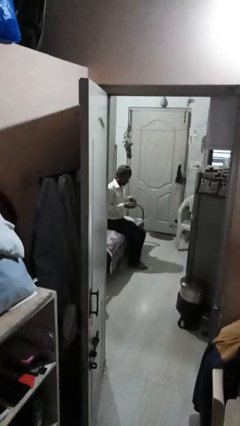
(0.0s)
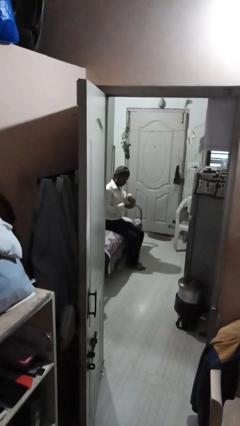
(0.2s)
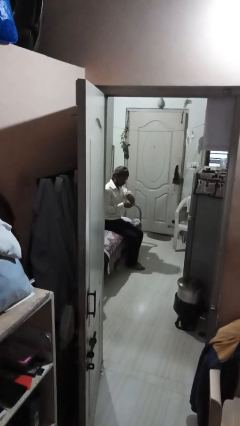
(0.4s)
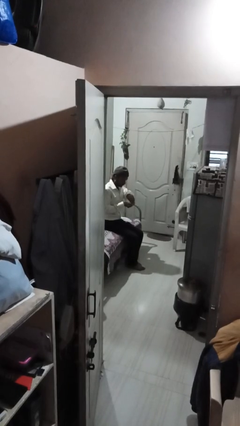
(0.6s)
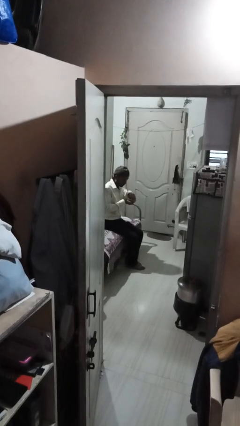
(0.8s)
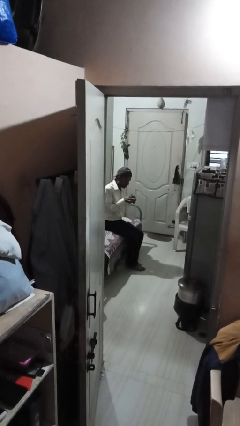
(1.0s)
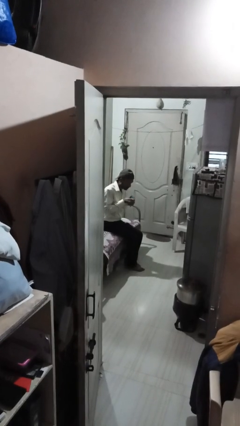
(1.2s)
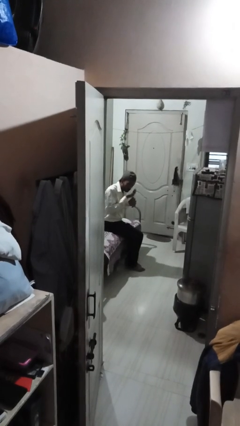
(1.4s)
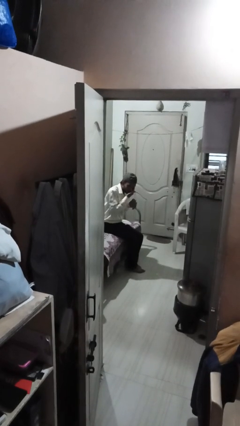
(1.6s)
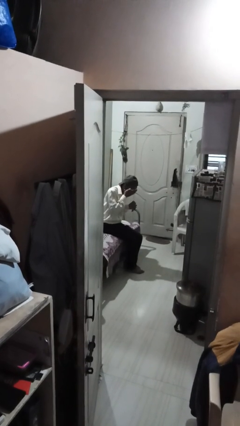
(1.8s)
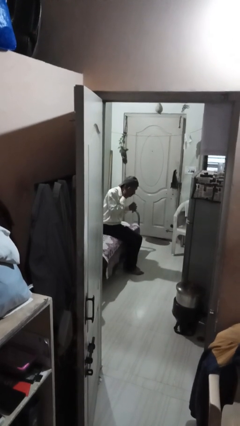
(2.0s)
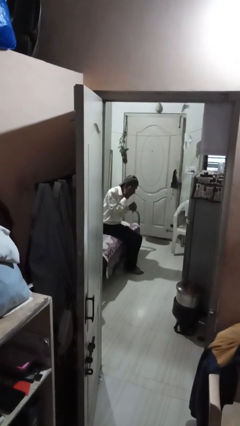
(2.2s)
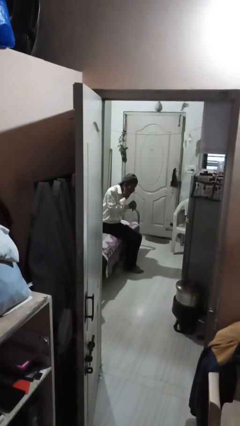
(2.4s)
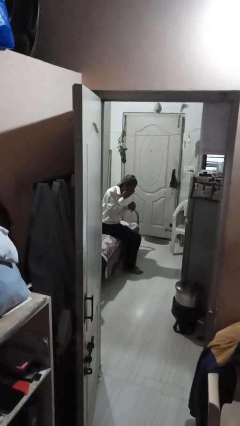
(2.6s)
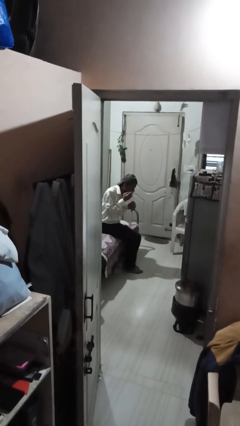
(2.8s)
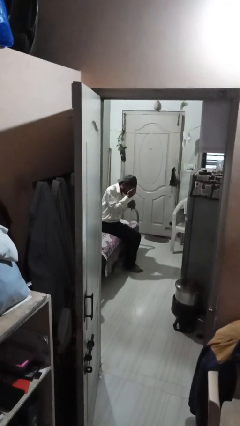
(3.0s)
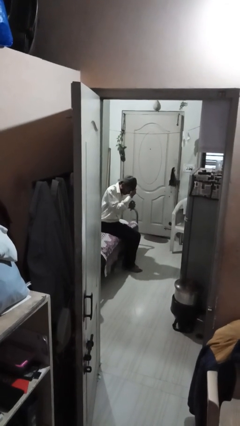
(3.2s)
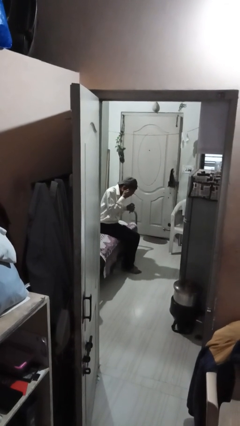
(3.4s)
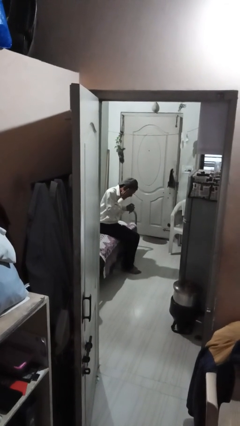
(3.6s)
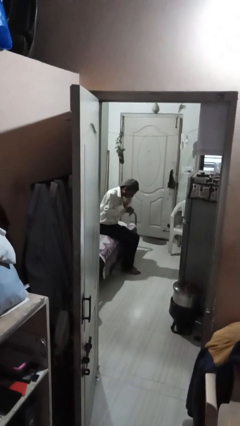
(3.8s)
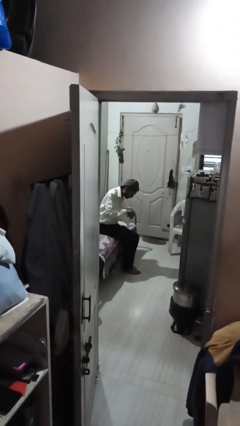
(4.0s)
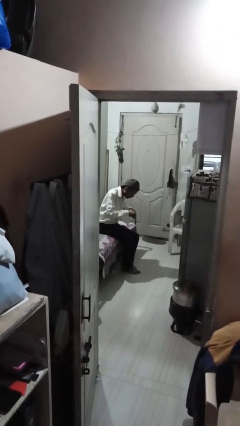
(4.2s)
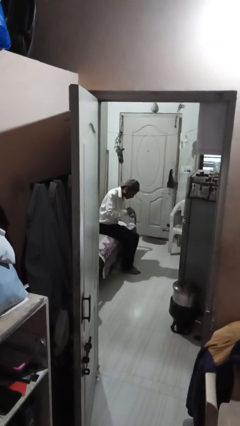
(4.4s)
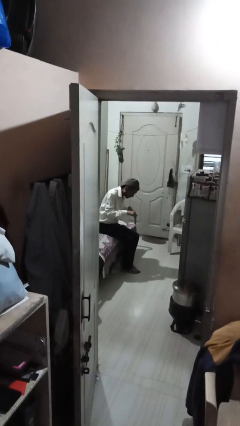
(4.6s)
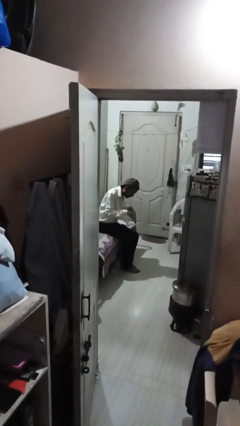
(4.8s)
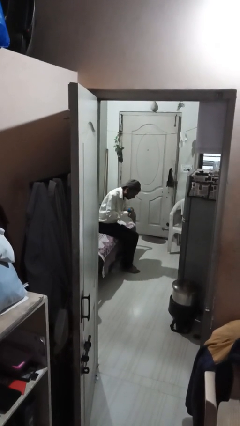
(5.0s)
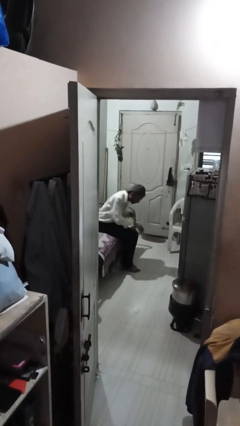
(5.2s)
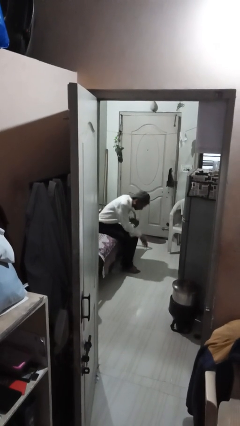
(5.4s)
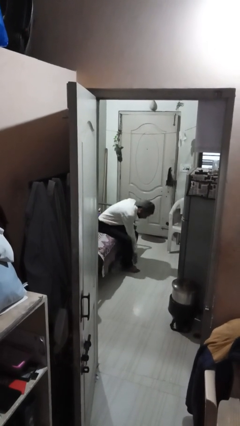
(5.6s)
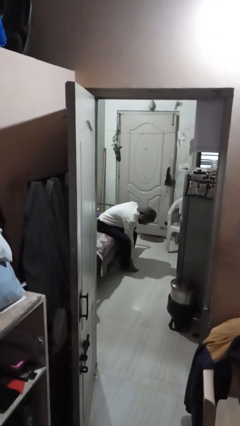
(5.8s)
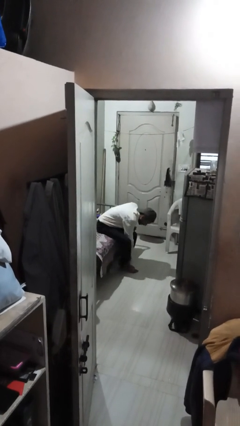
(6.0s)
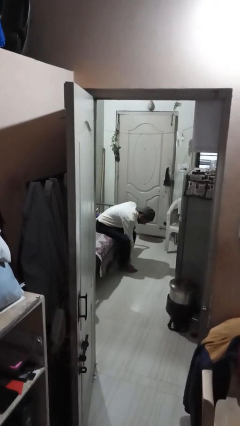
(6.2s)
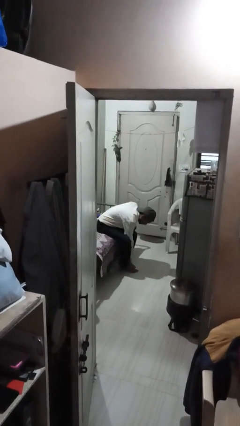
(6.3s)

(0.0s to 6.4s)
person applies facial moisturizer

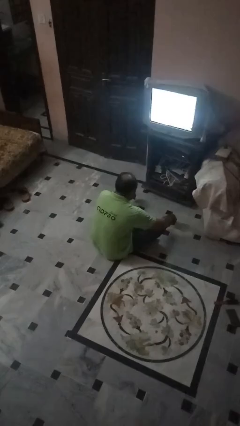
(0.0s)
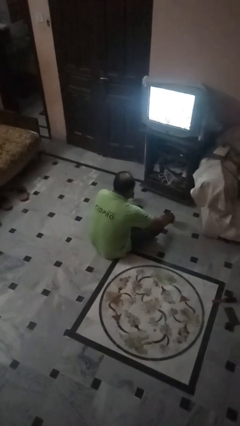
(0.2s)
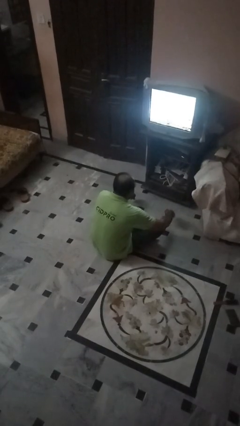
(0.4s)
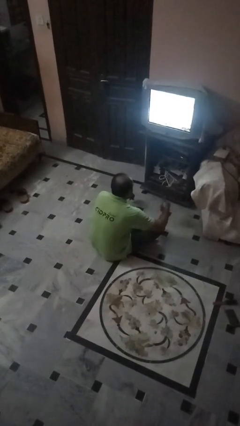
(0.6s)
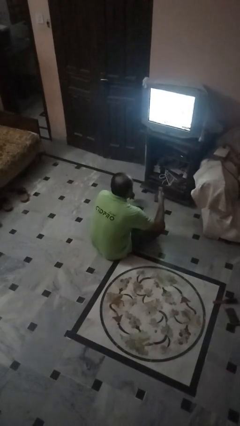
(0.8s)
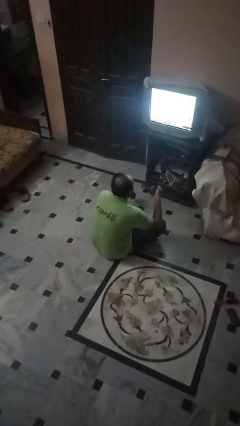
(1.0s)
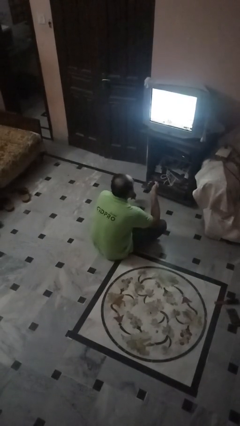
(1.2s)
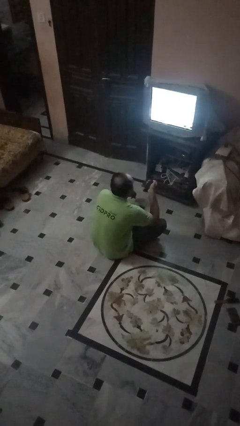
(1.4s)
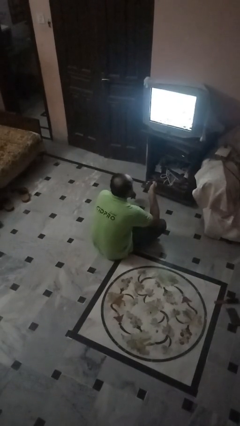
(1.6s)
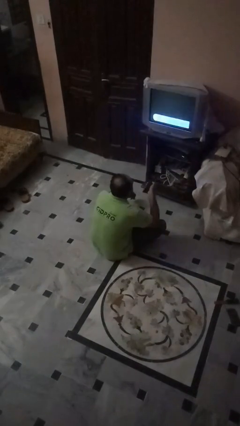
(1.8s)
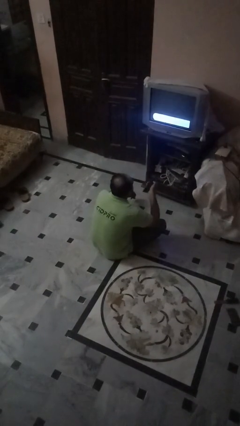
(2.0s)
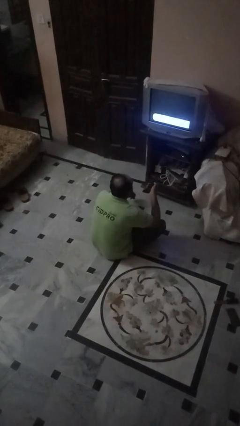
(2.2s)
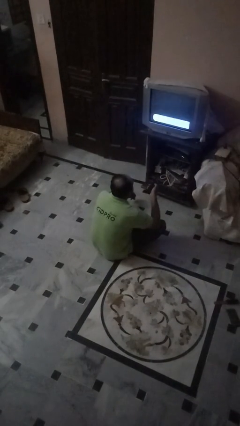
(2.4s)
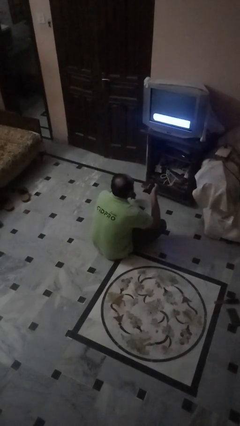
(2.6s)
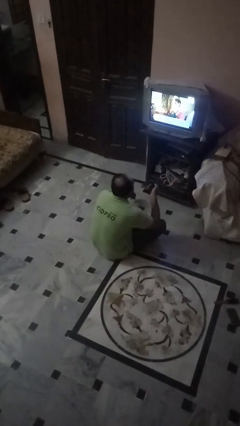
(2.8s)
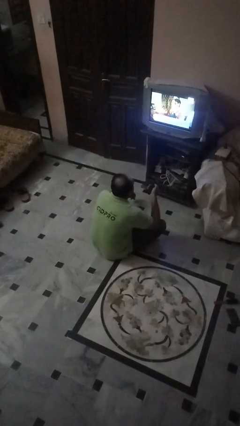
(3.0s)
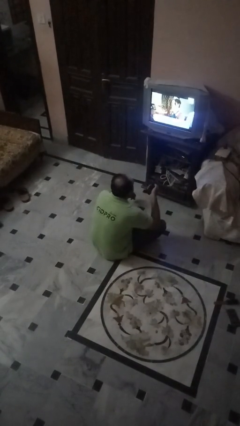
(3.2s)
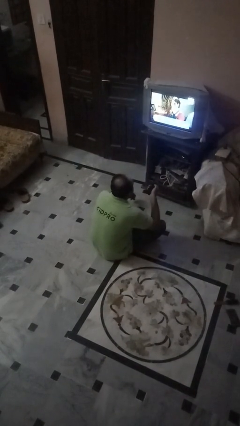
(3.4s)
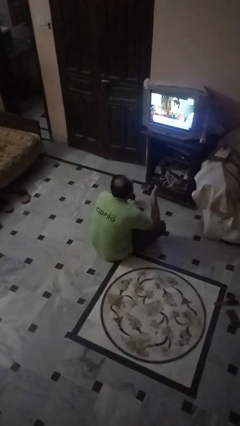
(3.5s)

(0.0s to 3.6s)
person uses television remote

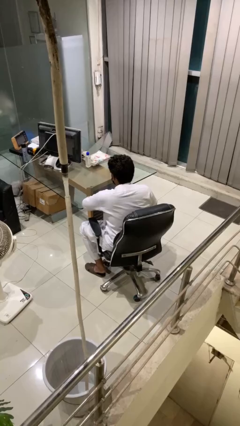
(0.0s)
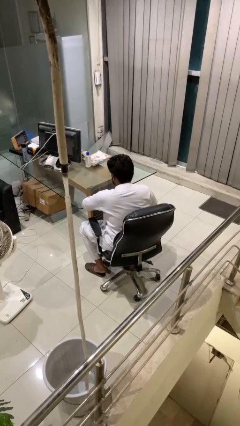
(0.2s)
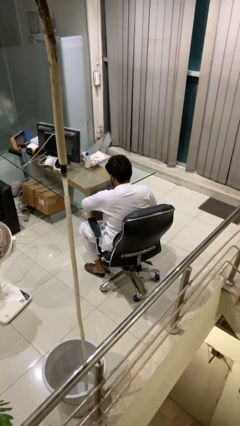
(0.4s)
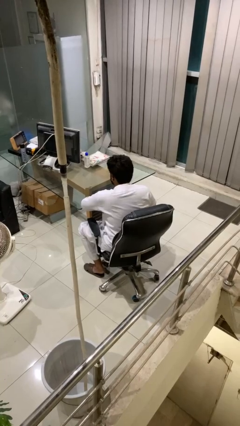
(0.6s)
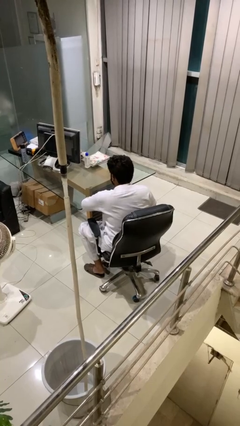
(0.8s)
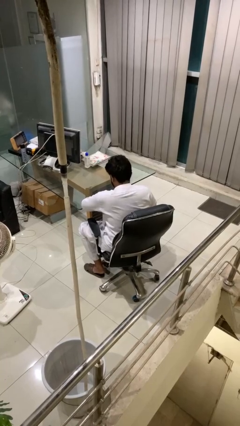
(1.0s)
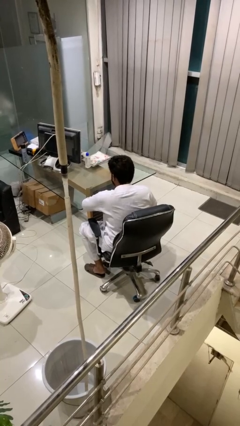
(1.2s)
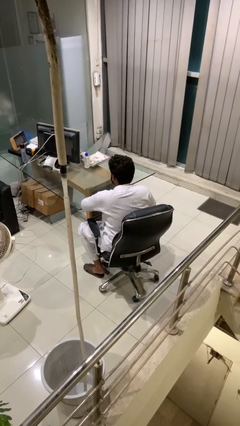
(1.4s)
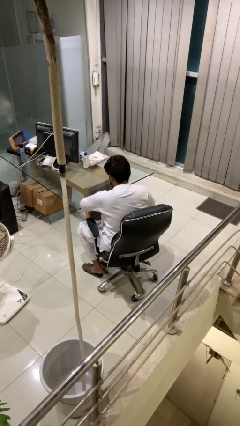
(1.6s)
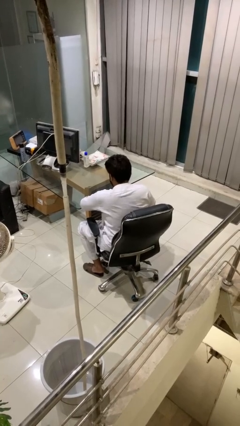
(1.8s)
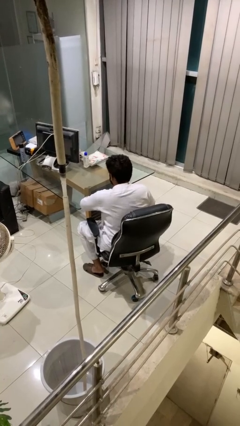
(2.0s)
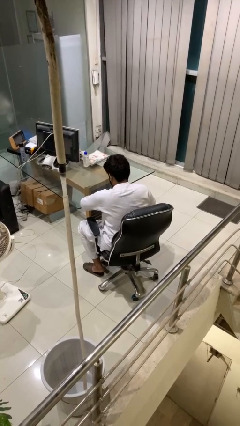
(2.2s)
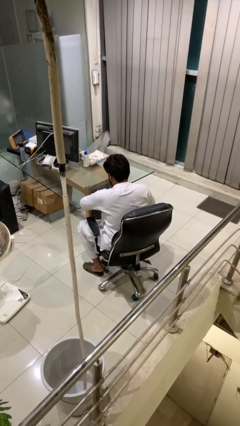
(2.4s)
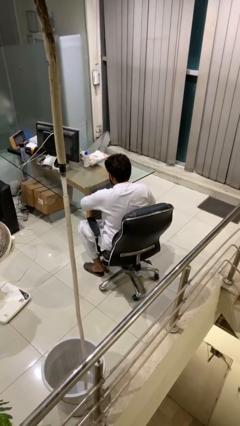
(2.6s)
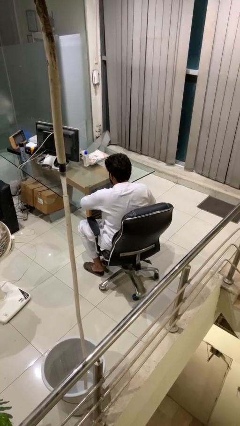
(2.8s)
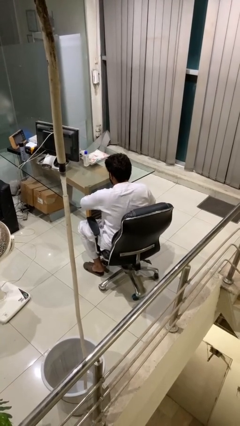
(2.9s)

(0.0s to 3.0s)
person nods head

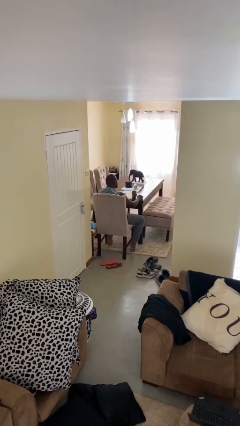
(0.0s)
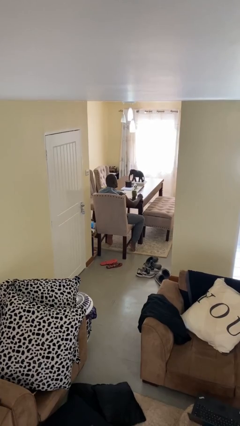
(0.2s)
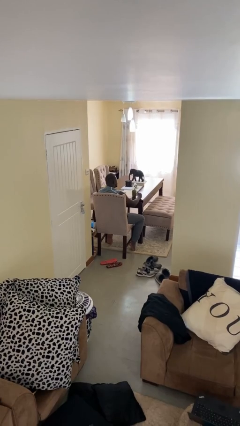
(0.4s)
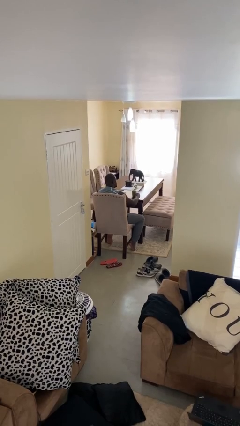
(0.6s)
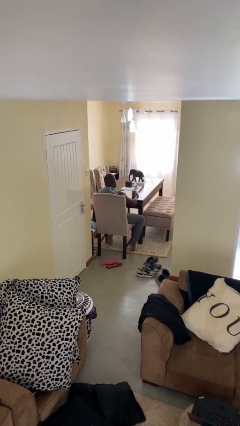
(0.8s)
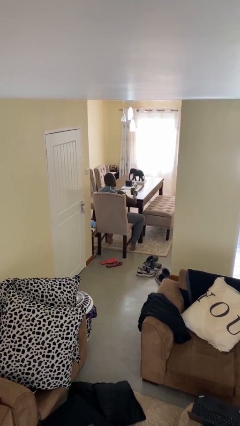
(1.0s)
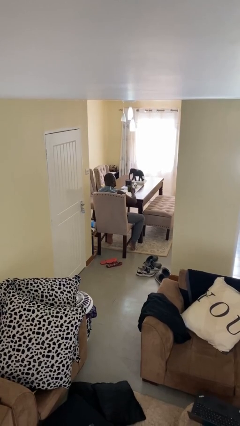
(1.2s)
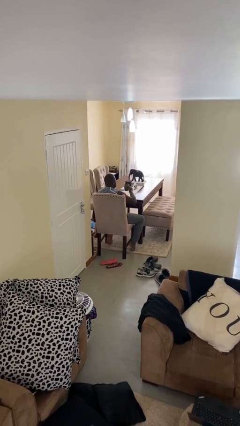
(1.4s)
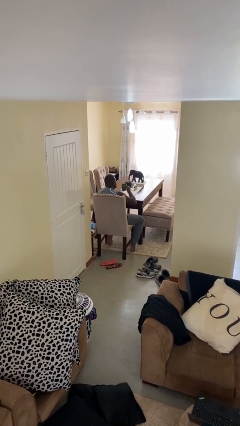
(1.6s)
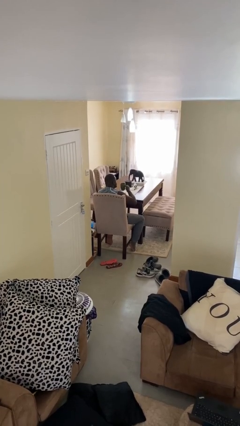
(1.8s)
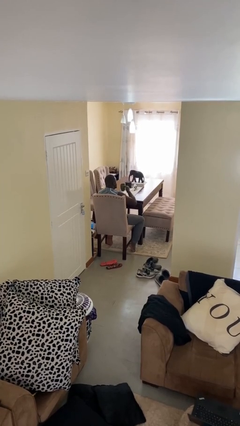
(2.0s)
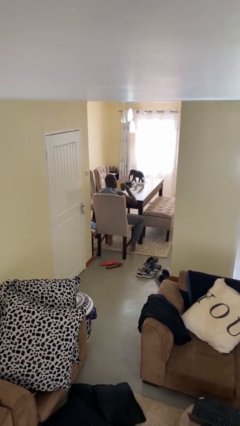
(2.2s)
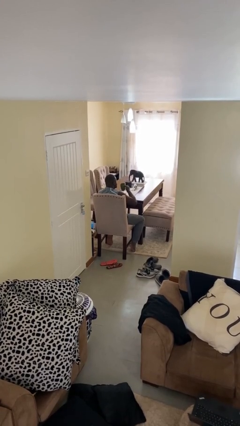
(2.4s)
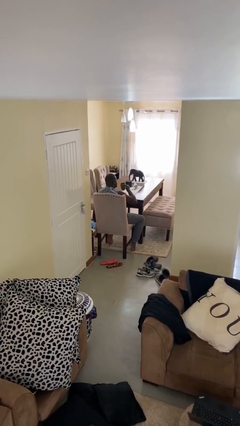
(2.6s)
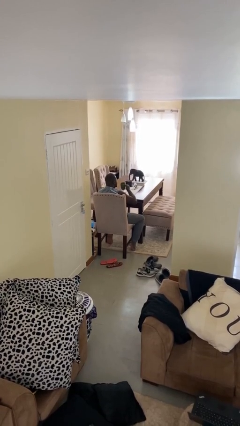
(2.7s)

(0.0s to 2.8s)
person picks up object from table

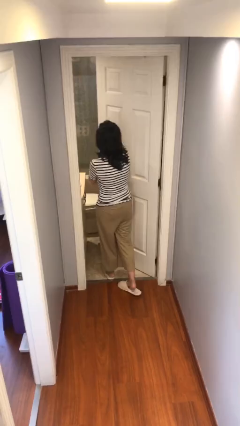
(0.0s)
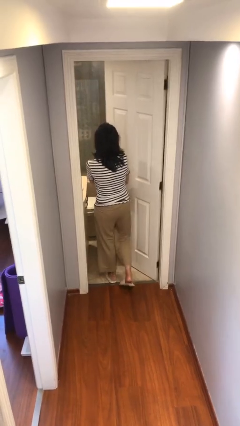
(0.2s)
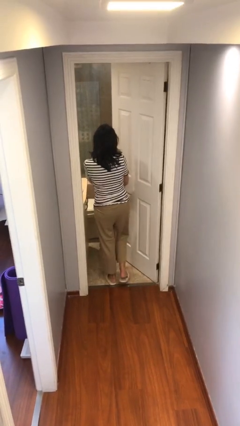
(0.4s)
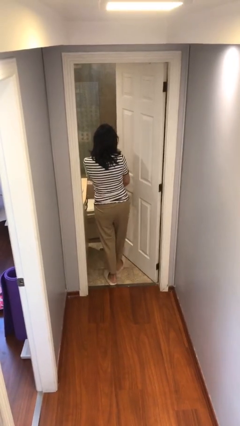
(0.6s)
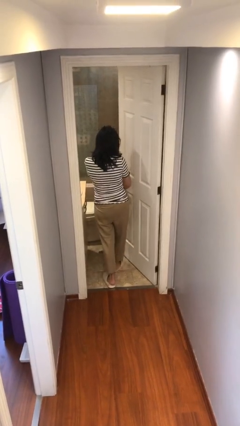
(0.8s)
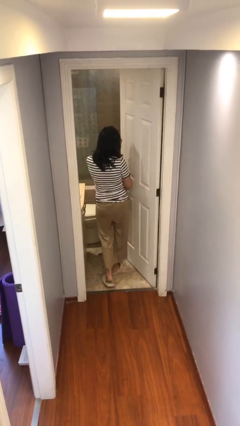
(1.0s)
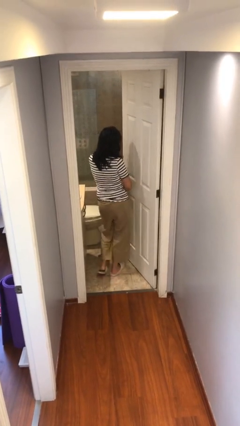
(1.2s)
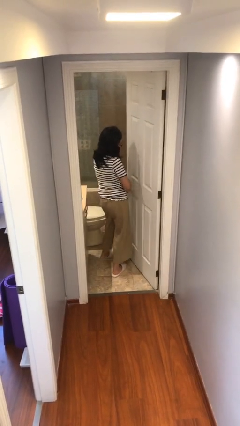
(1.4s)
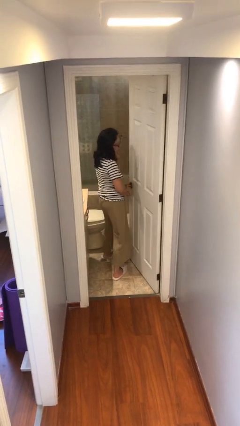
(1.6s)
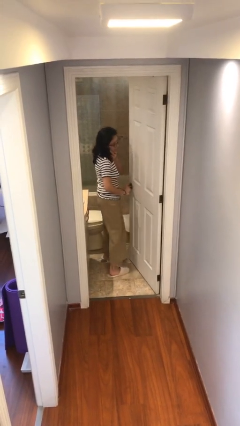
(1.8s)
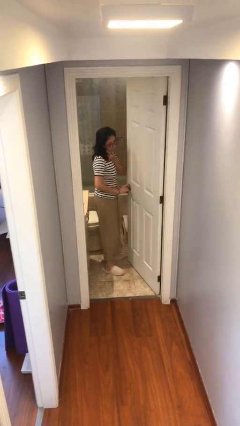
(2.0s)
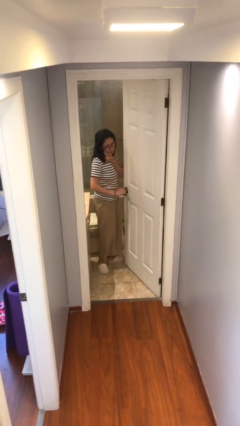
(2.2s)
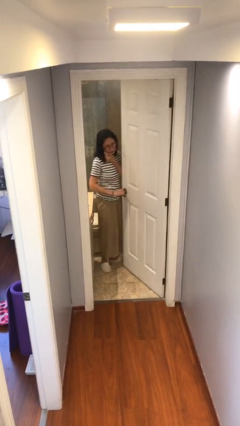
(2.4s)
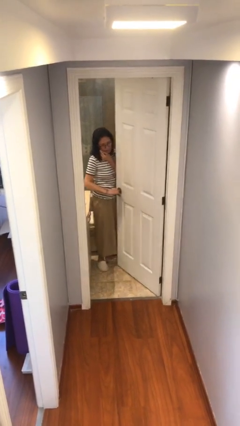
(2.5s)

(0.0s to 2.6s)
person exits scene through structure
